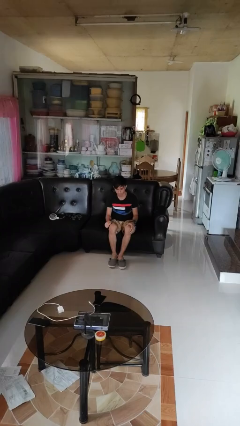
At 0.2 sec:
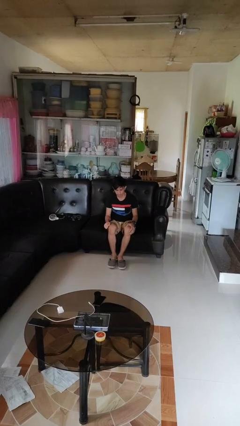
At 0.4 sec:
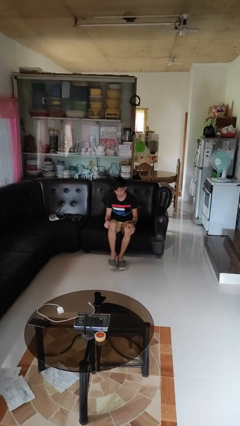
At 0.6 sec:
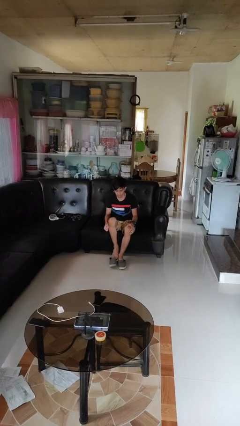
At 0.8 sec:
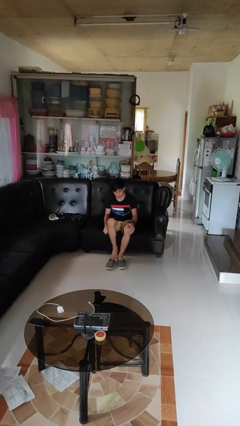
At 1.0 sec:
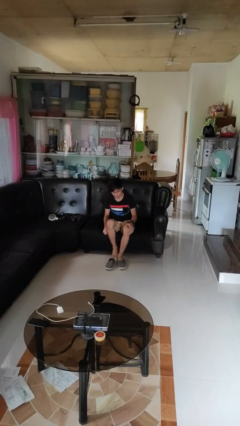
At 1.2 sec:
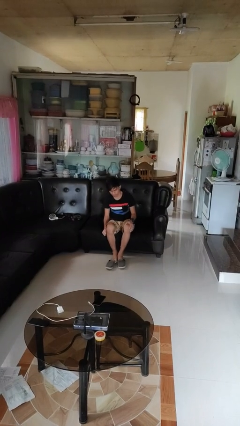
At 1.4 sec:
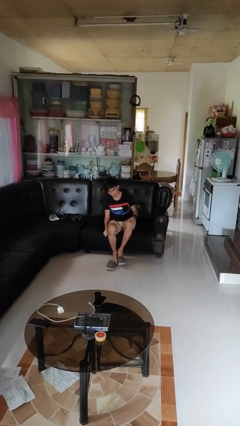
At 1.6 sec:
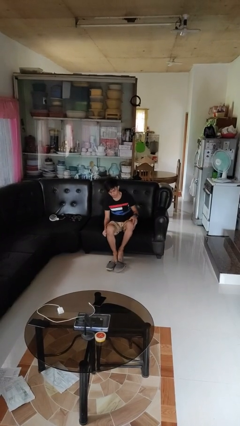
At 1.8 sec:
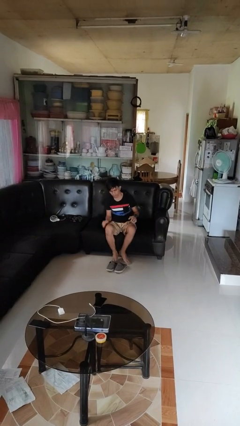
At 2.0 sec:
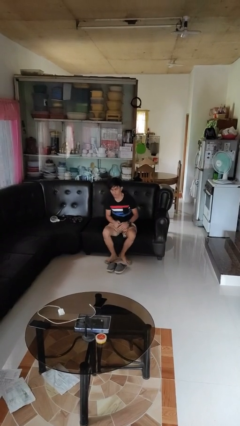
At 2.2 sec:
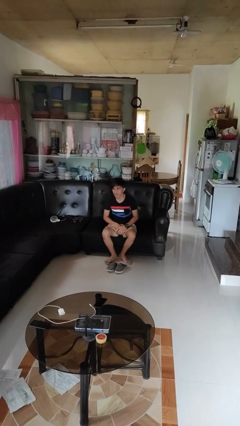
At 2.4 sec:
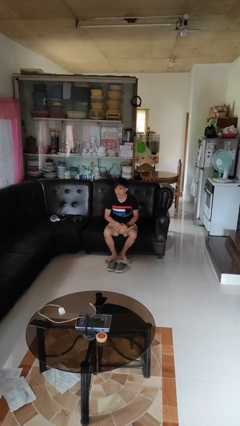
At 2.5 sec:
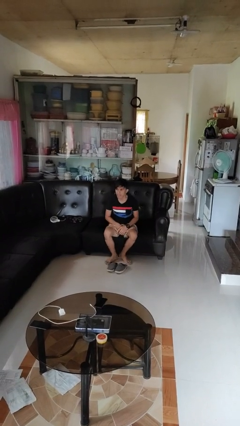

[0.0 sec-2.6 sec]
person takes off shoes

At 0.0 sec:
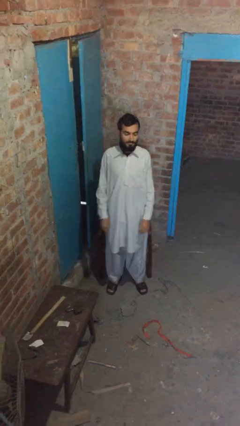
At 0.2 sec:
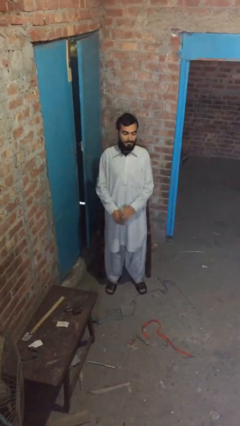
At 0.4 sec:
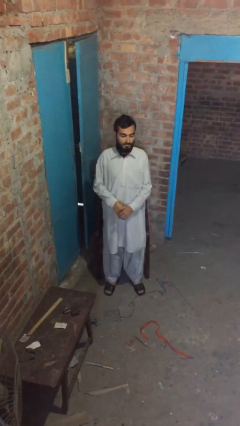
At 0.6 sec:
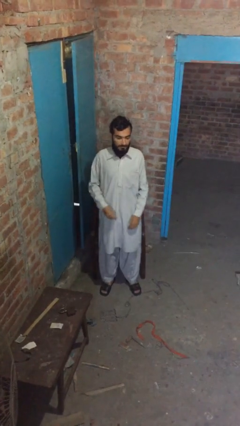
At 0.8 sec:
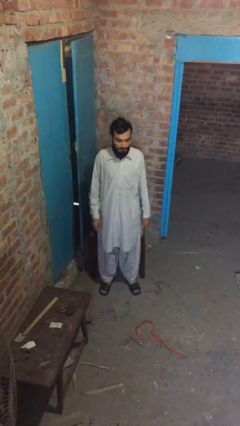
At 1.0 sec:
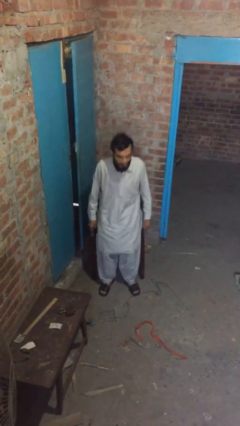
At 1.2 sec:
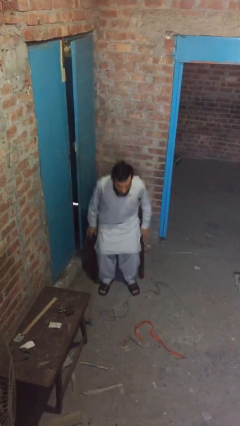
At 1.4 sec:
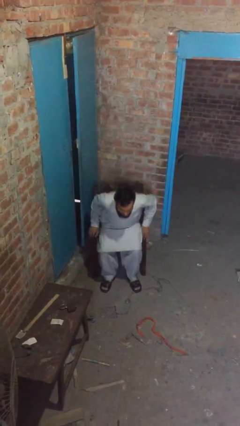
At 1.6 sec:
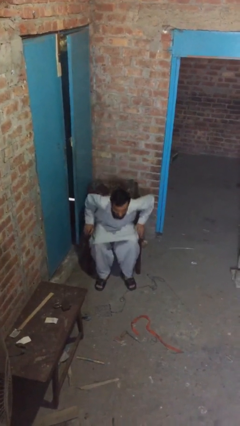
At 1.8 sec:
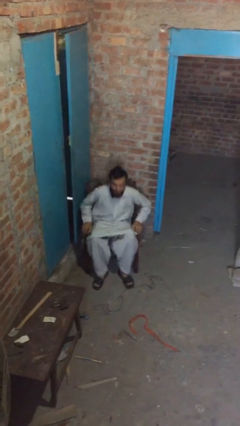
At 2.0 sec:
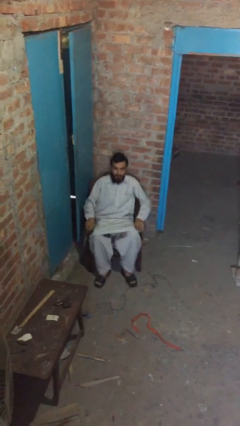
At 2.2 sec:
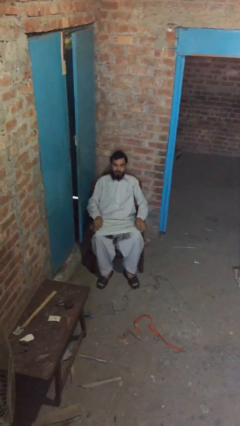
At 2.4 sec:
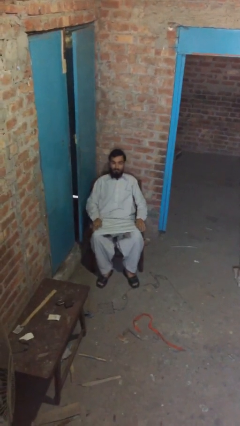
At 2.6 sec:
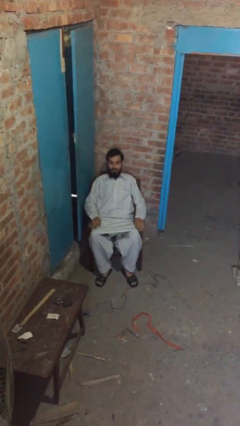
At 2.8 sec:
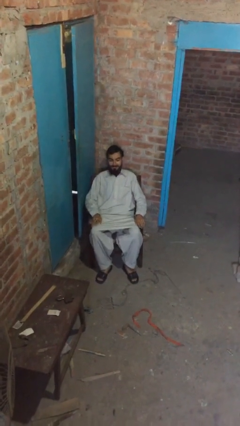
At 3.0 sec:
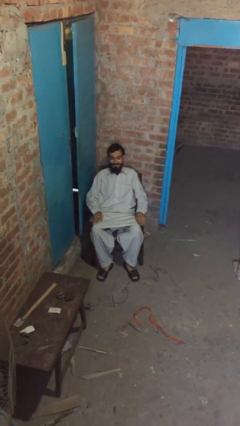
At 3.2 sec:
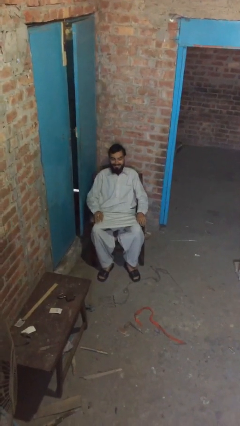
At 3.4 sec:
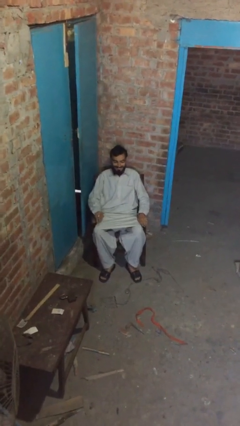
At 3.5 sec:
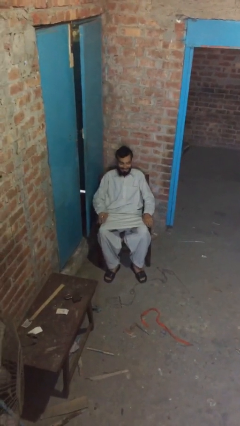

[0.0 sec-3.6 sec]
person sits down

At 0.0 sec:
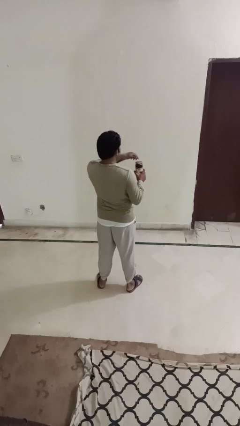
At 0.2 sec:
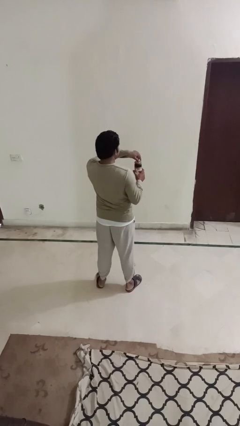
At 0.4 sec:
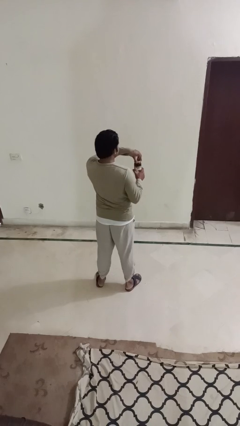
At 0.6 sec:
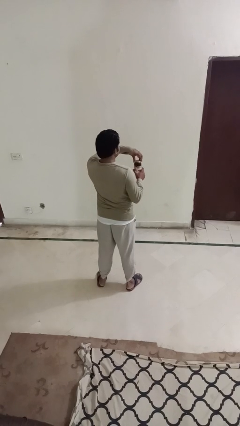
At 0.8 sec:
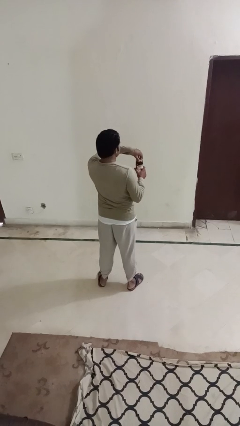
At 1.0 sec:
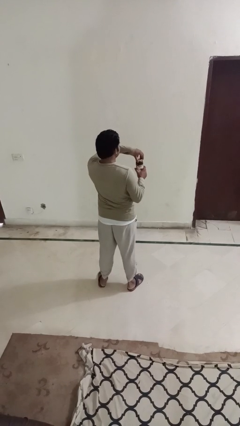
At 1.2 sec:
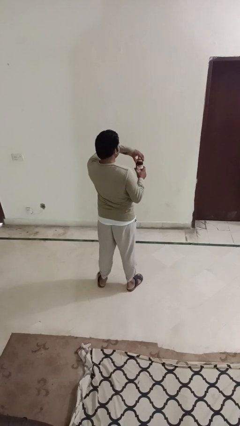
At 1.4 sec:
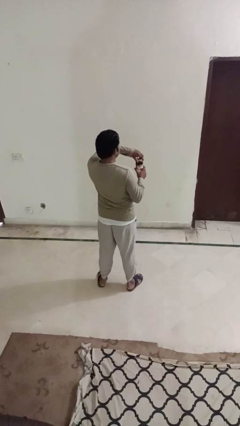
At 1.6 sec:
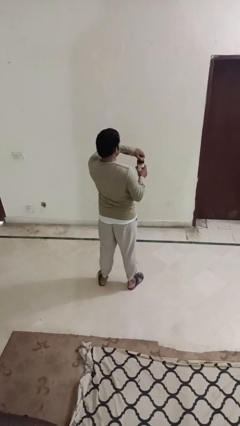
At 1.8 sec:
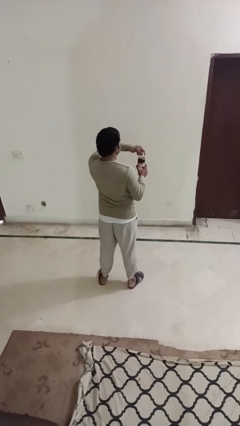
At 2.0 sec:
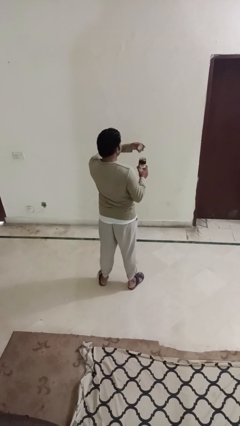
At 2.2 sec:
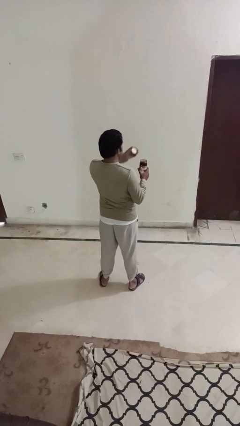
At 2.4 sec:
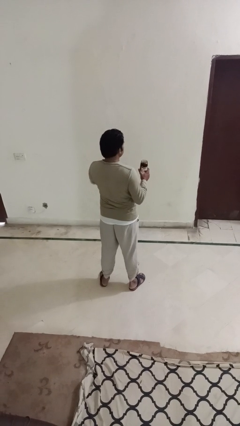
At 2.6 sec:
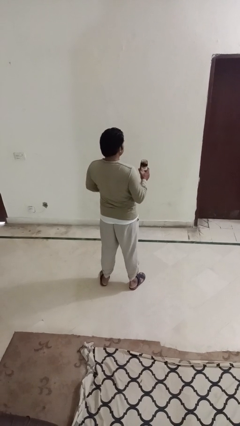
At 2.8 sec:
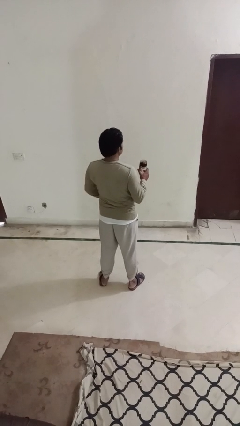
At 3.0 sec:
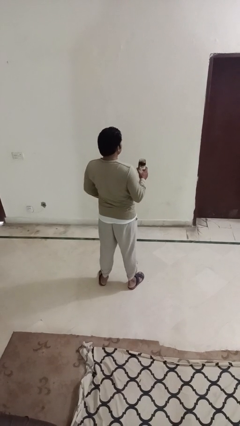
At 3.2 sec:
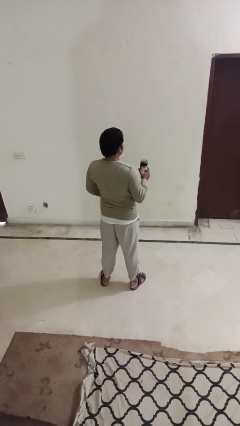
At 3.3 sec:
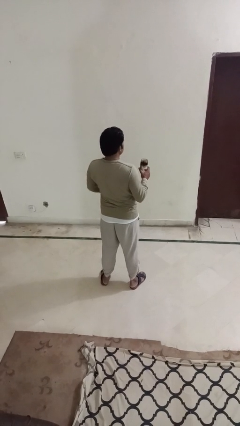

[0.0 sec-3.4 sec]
person opens jar

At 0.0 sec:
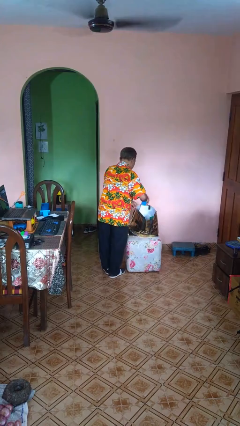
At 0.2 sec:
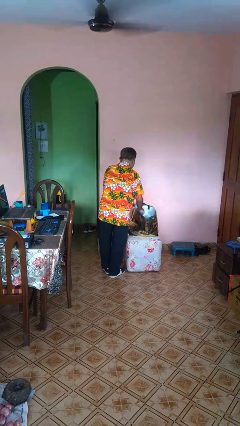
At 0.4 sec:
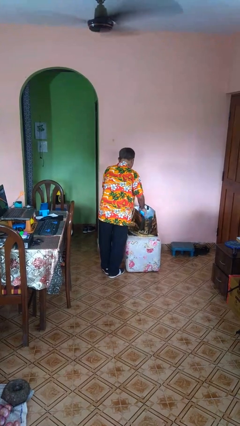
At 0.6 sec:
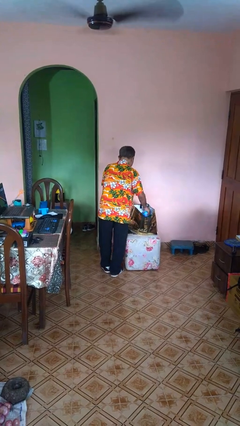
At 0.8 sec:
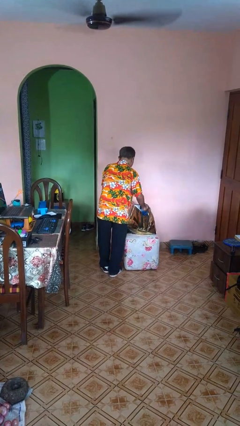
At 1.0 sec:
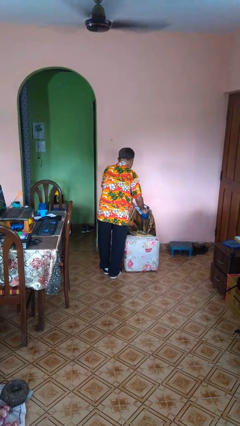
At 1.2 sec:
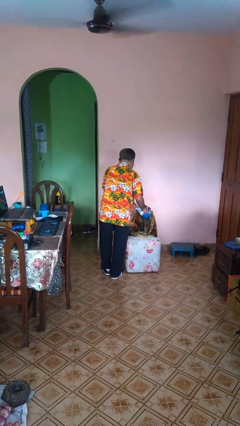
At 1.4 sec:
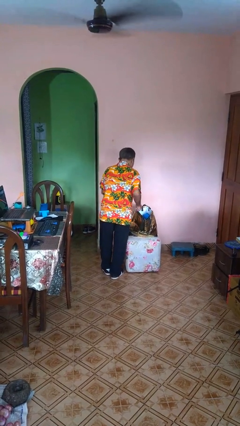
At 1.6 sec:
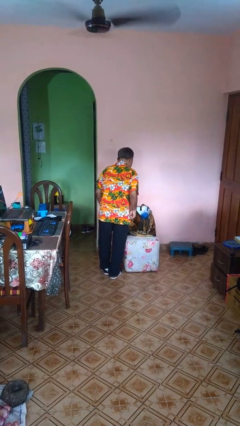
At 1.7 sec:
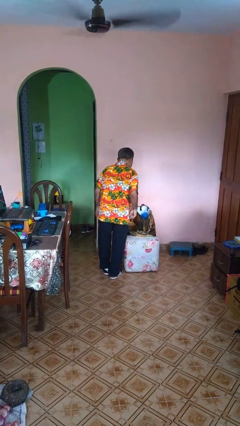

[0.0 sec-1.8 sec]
person puts object into bag

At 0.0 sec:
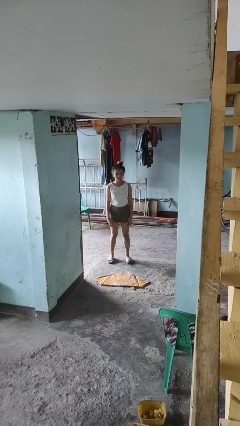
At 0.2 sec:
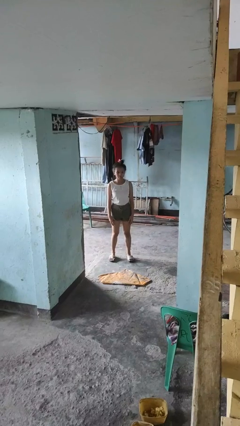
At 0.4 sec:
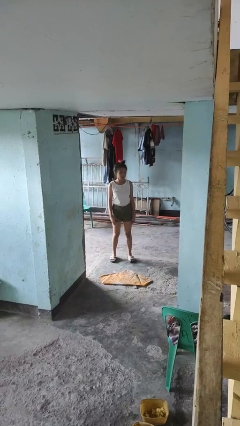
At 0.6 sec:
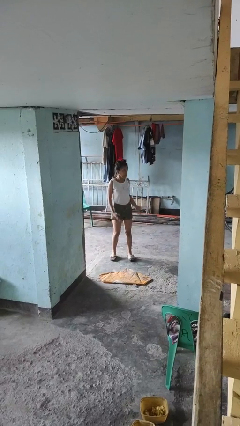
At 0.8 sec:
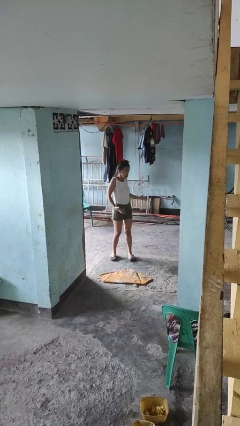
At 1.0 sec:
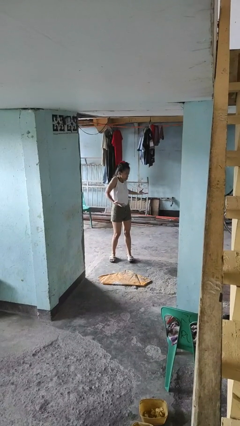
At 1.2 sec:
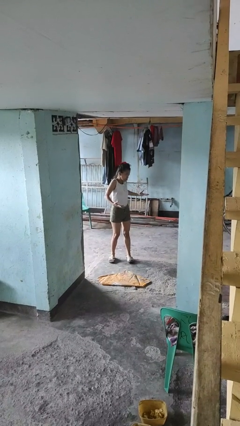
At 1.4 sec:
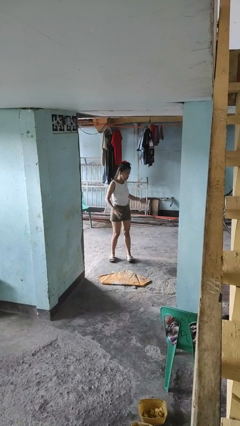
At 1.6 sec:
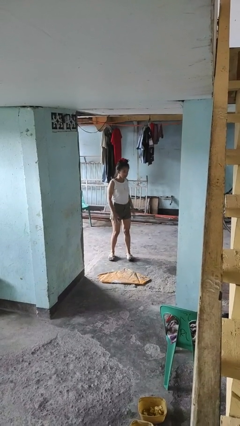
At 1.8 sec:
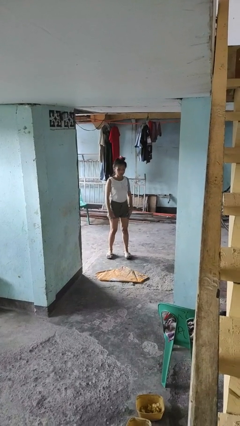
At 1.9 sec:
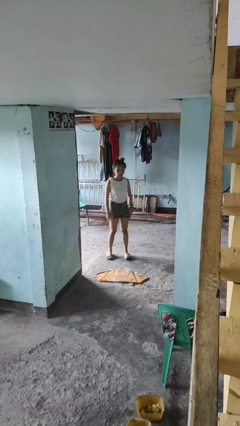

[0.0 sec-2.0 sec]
person shrugs

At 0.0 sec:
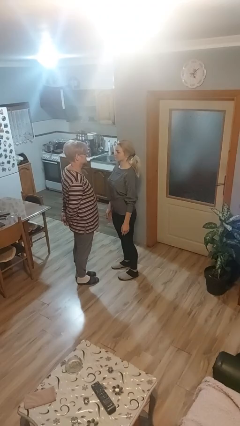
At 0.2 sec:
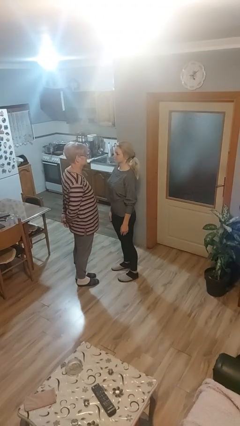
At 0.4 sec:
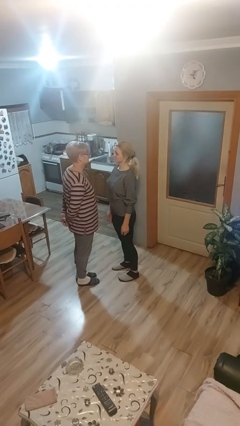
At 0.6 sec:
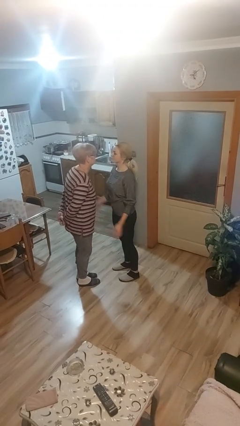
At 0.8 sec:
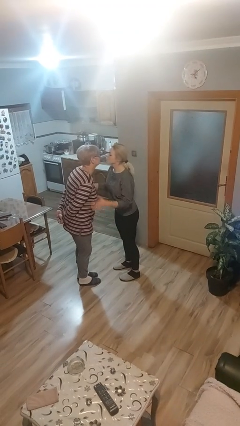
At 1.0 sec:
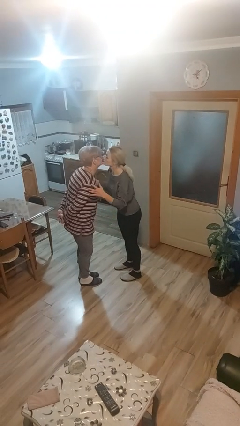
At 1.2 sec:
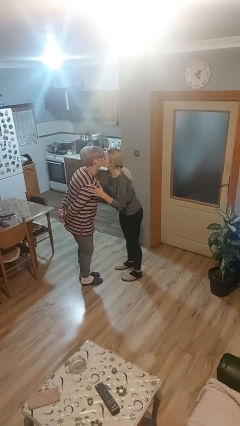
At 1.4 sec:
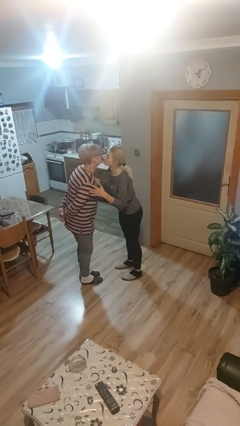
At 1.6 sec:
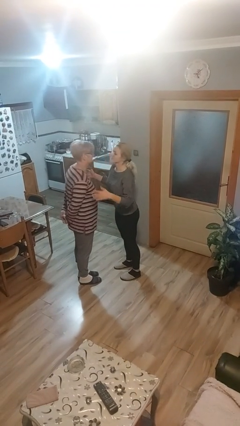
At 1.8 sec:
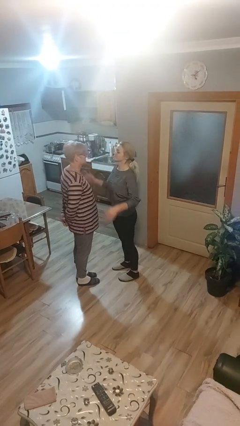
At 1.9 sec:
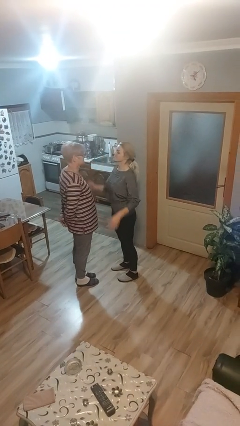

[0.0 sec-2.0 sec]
person kisses cheek of person

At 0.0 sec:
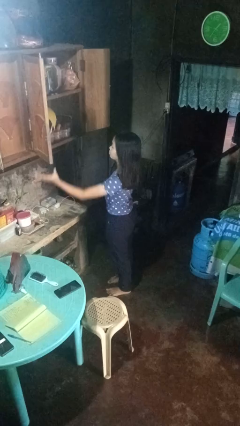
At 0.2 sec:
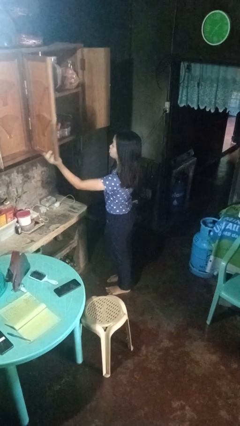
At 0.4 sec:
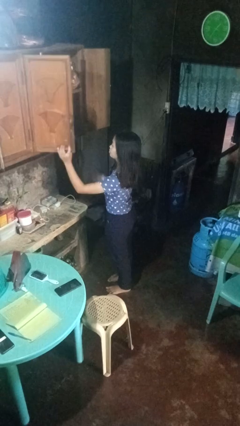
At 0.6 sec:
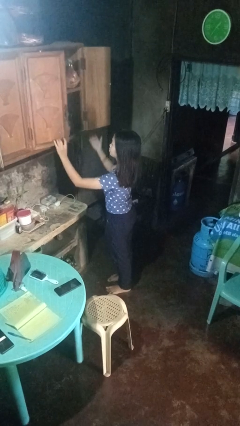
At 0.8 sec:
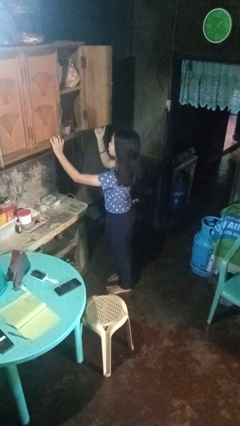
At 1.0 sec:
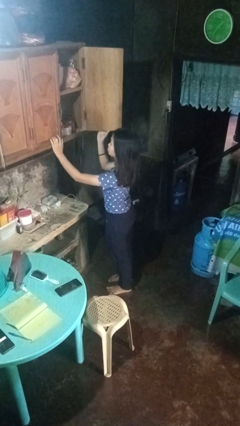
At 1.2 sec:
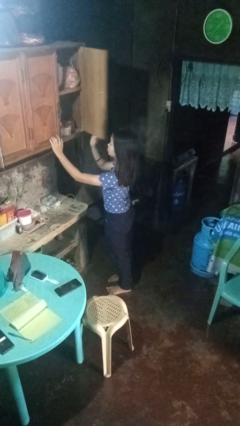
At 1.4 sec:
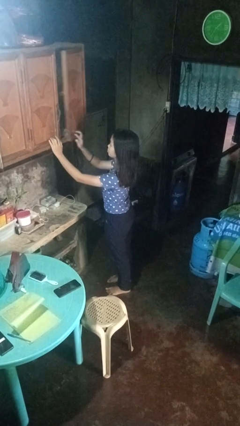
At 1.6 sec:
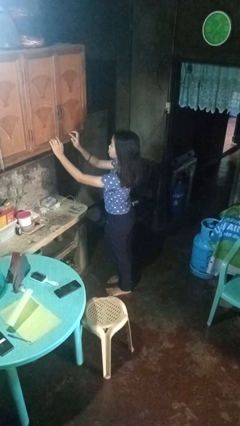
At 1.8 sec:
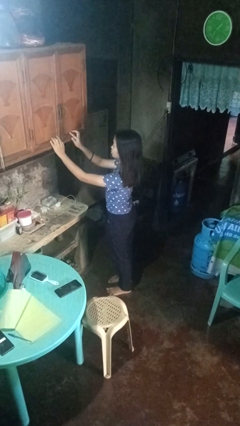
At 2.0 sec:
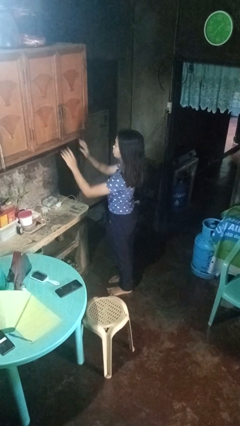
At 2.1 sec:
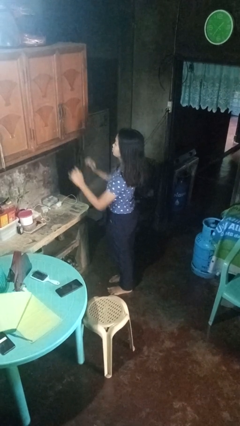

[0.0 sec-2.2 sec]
person closes cabinet
